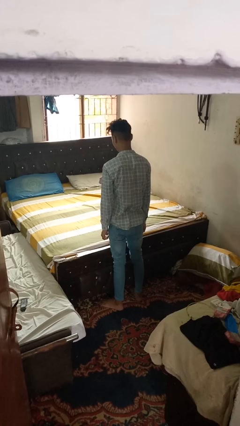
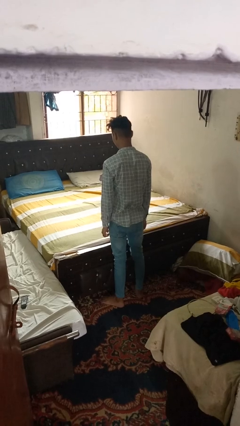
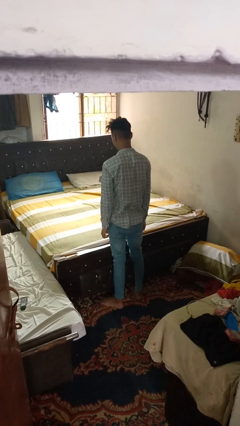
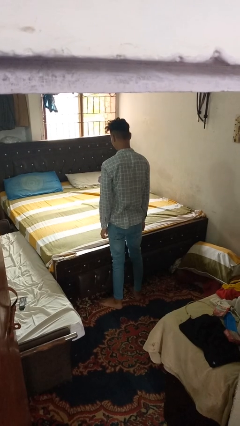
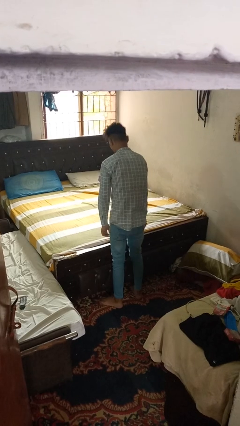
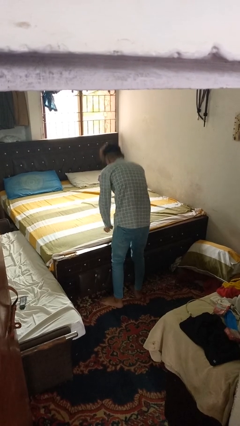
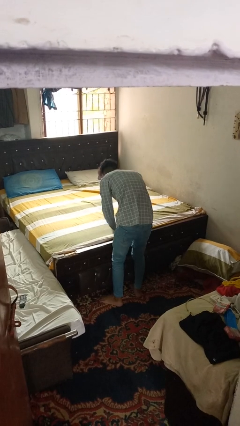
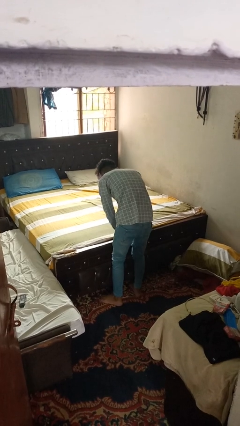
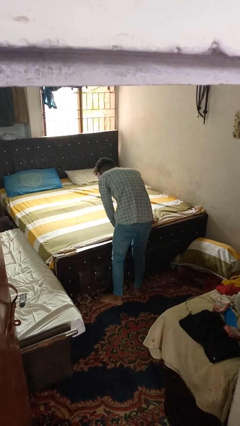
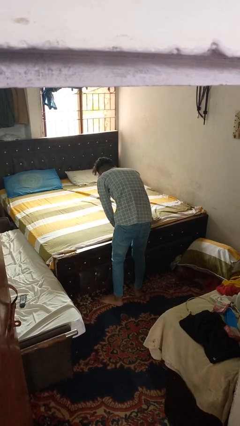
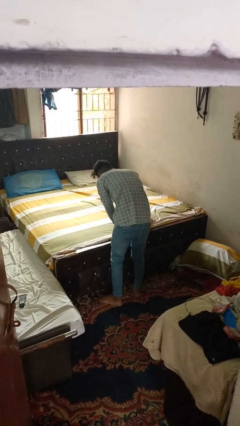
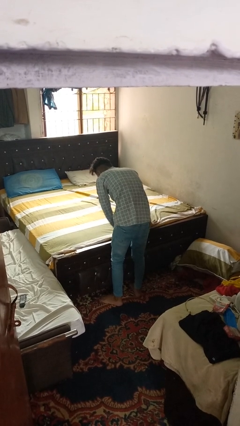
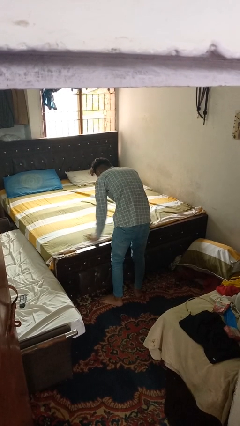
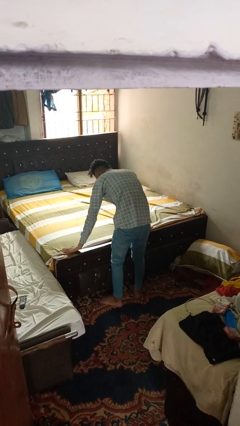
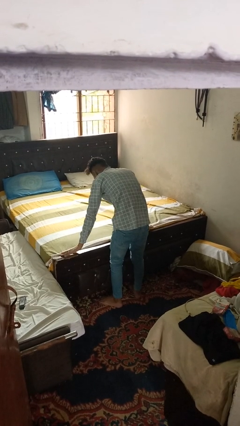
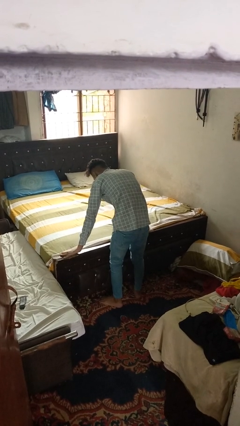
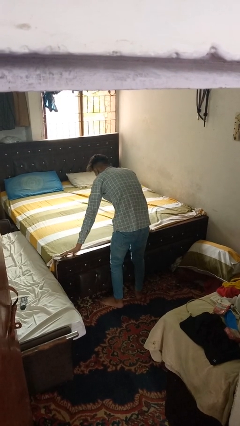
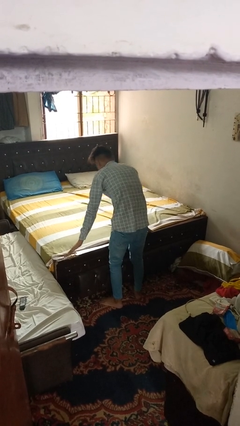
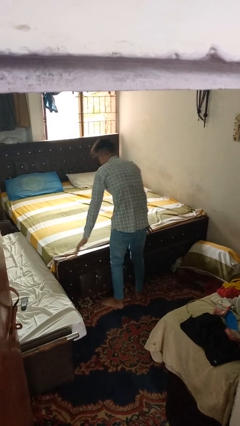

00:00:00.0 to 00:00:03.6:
person makes bed

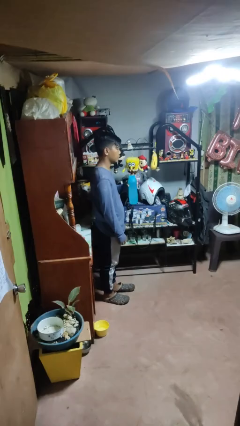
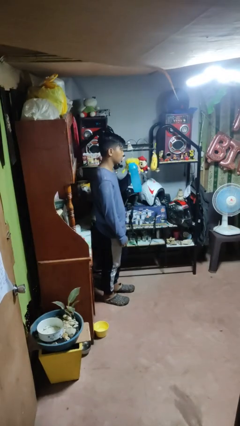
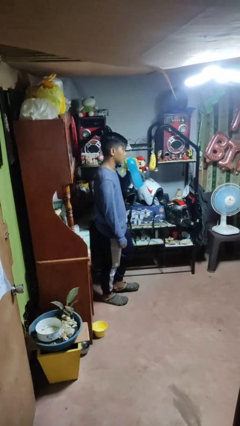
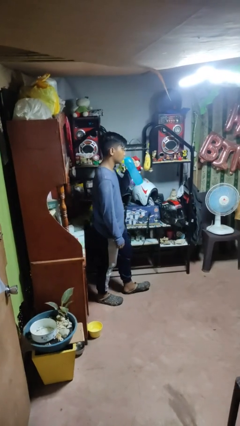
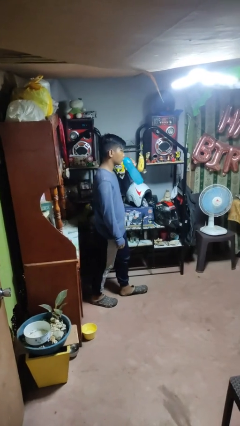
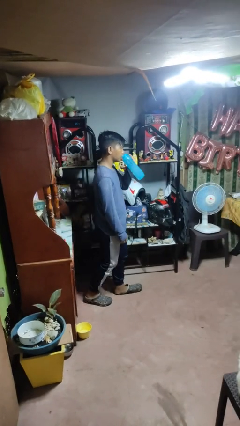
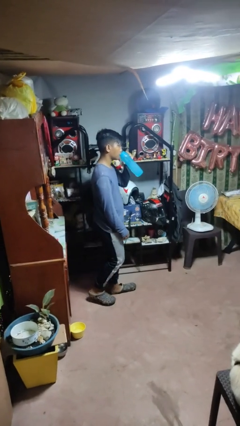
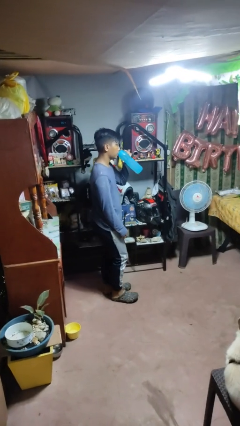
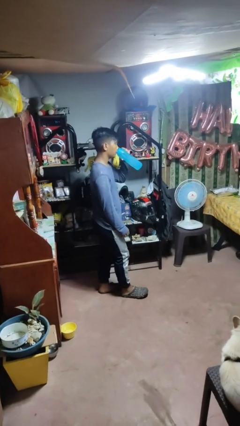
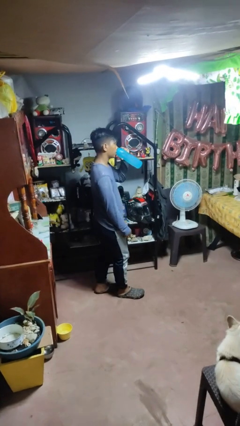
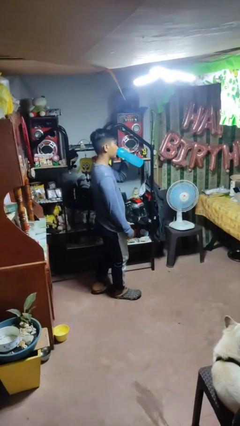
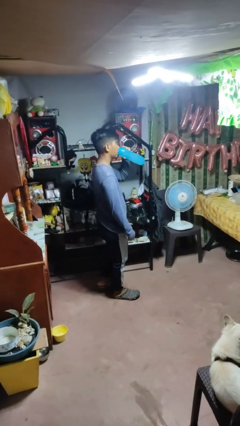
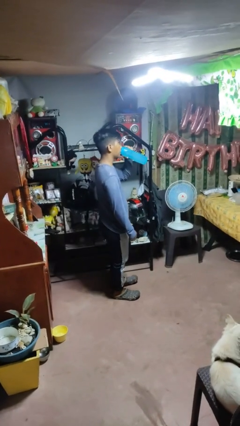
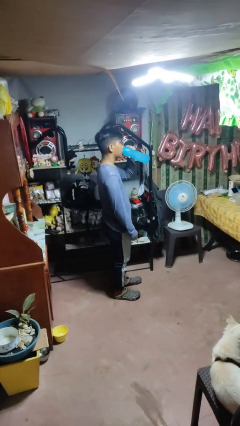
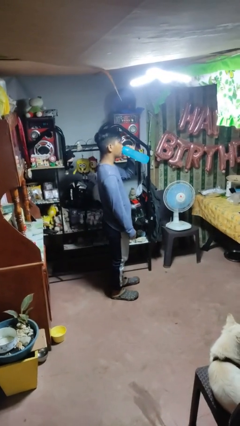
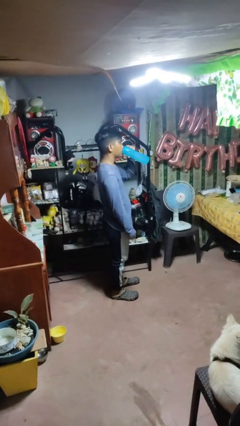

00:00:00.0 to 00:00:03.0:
person drinks from bottle

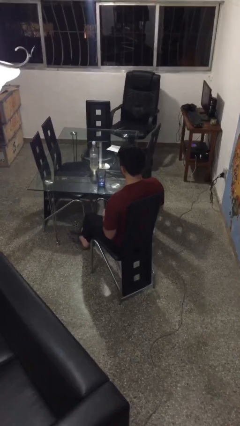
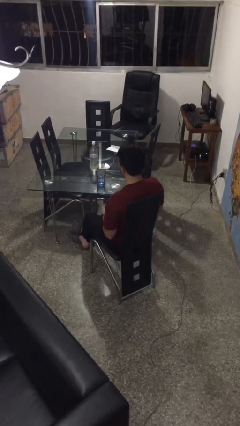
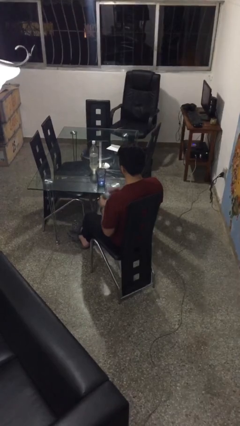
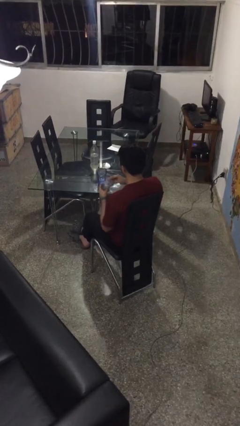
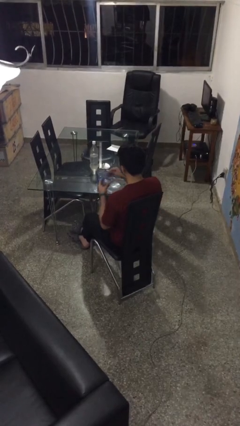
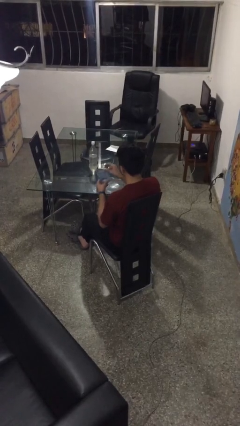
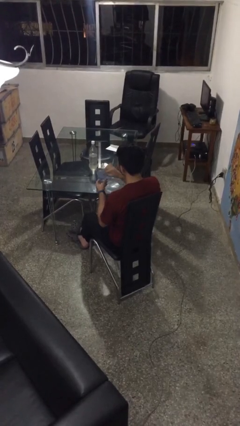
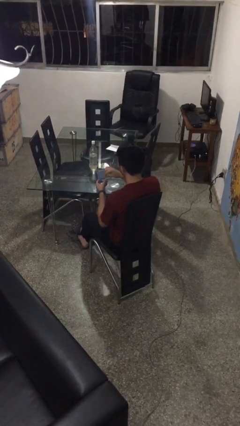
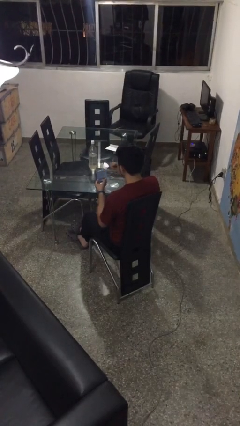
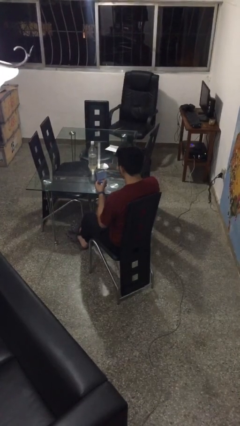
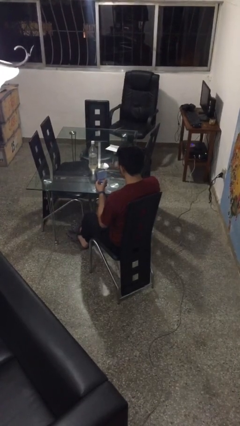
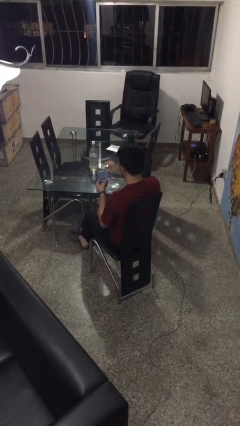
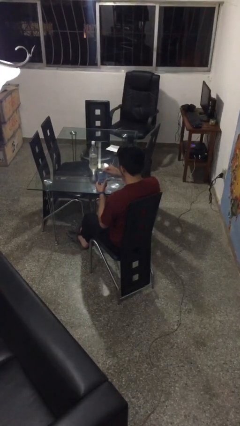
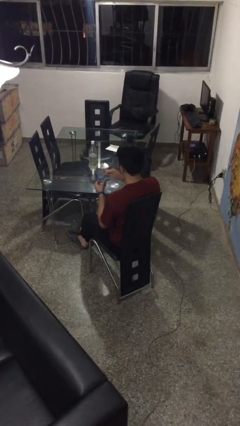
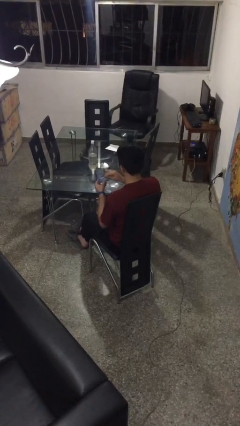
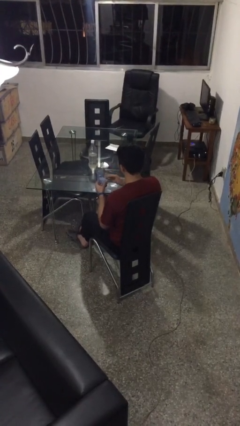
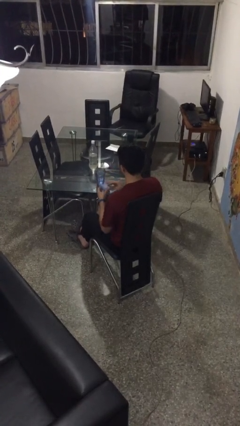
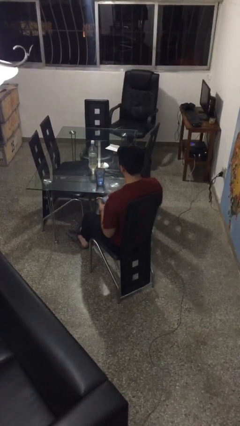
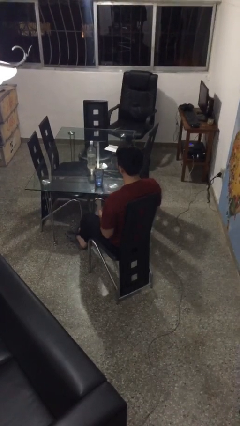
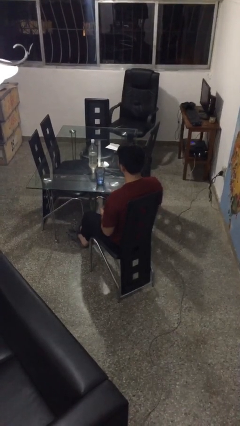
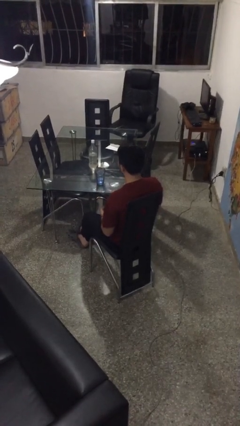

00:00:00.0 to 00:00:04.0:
person takes medicine pills

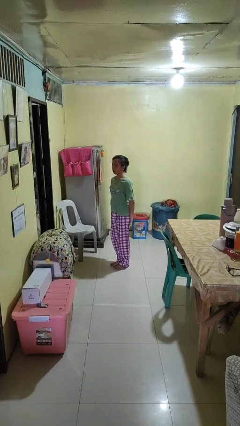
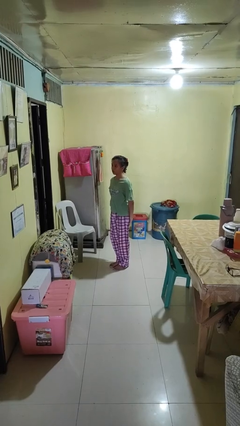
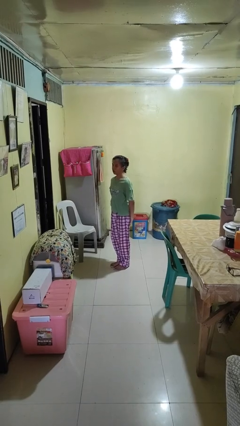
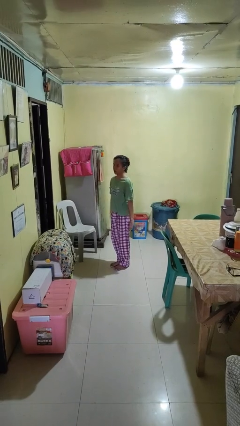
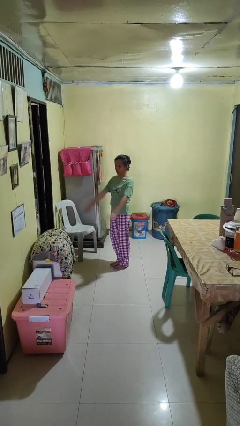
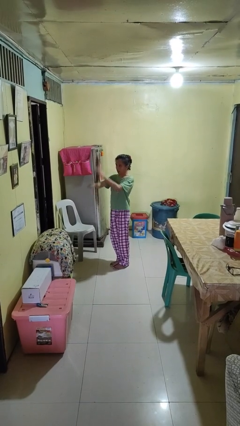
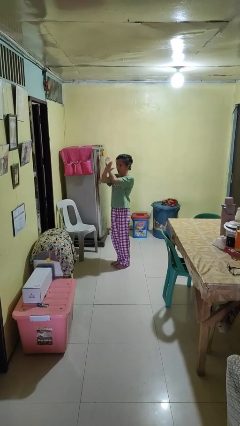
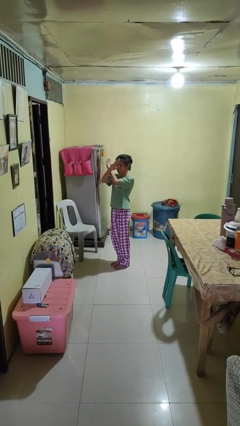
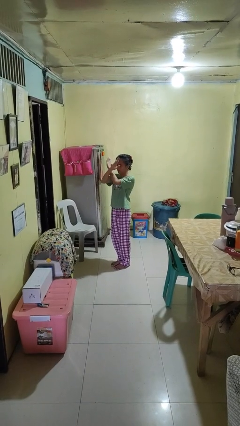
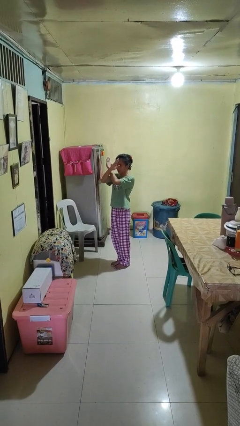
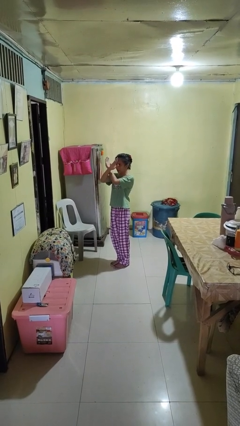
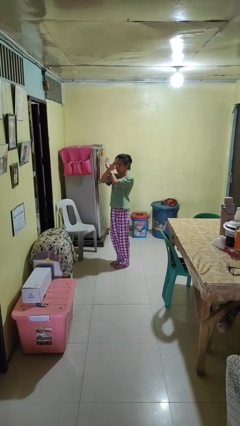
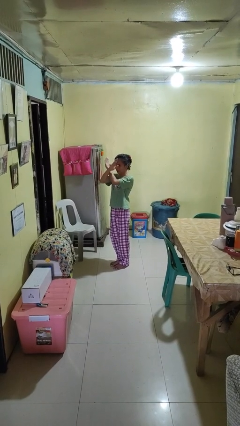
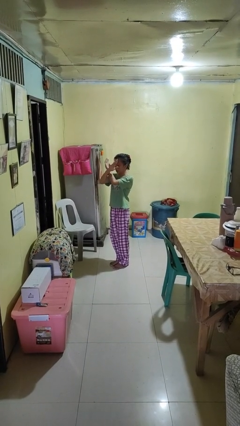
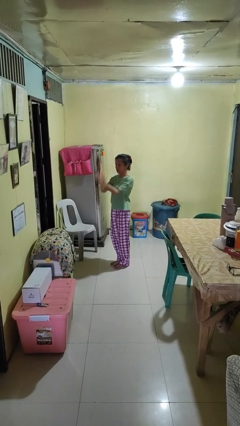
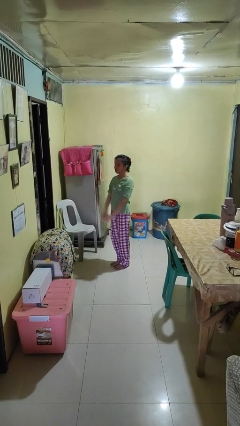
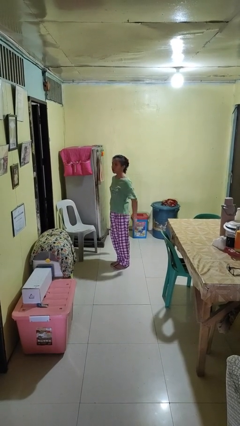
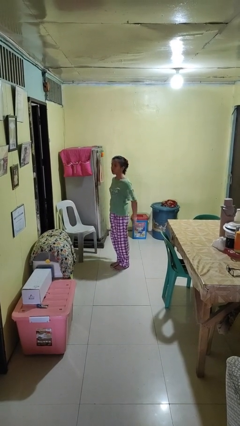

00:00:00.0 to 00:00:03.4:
person gestures arms x

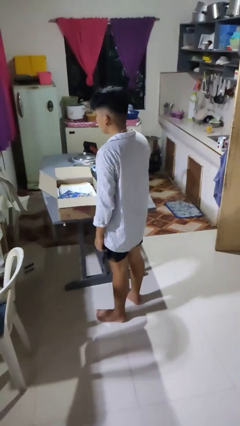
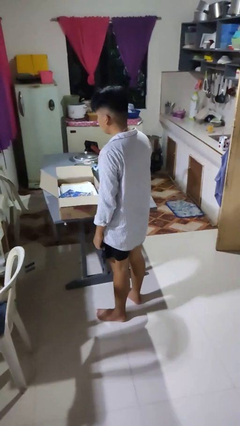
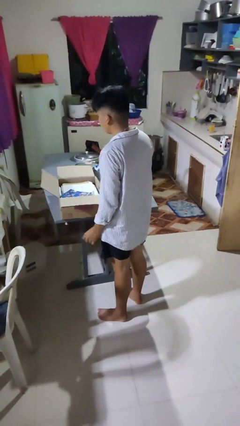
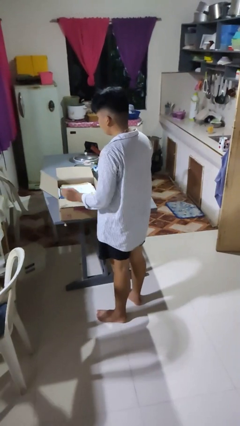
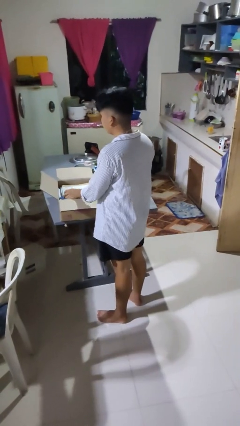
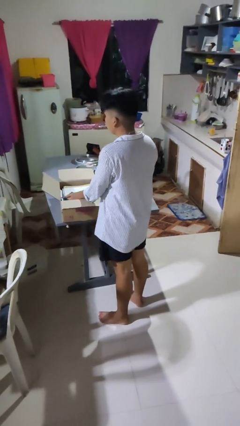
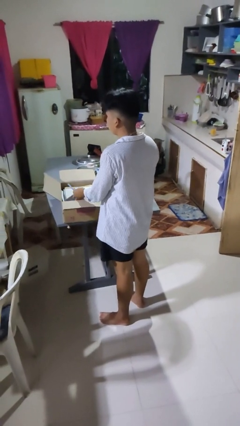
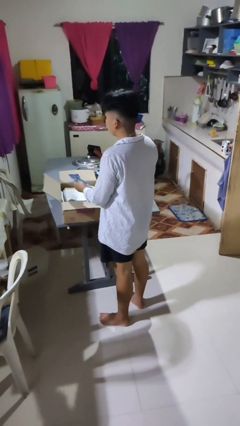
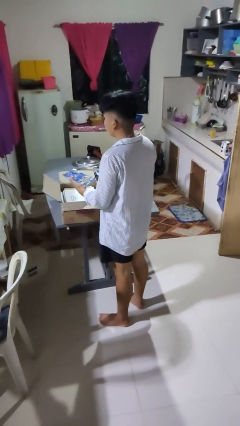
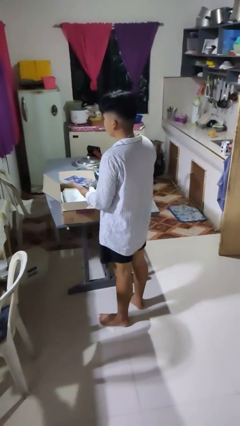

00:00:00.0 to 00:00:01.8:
person takes object from box

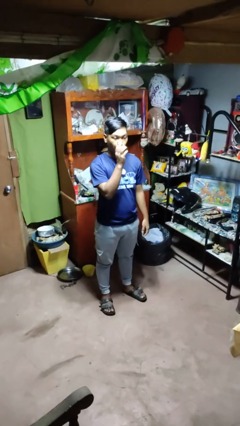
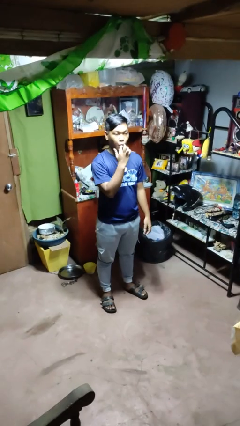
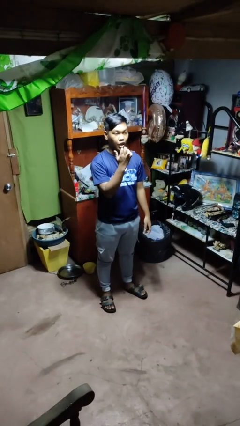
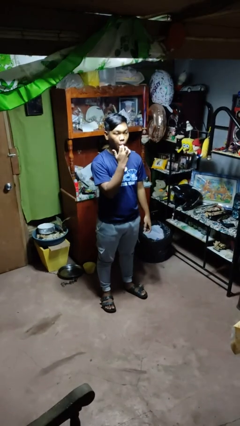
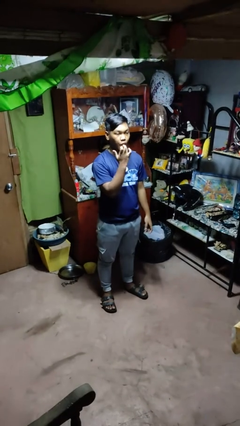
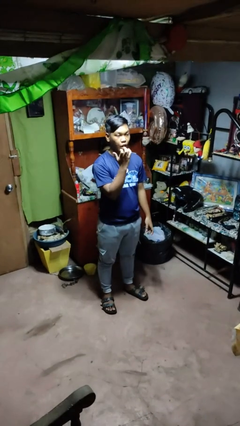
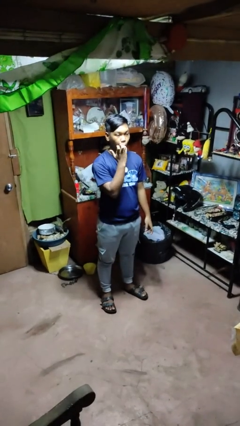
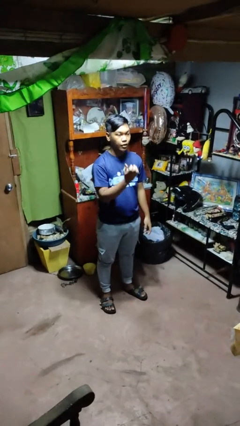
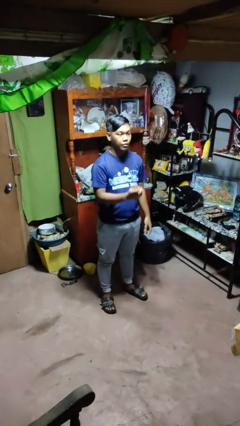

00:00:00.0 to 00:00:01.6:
person licks fingers
